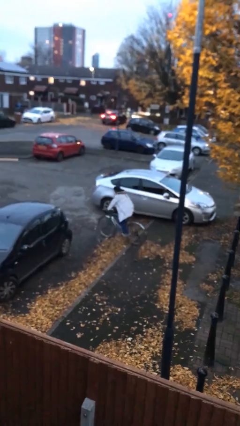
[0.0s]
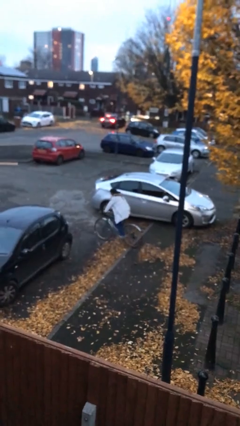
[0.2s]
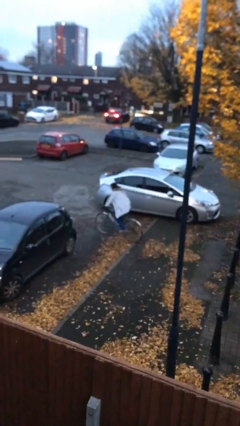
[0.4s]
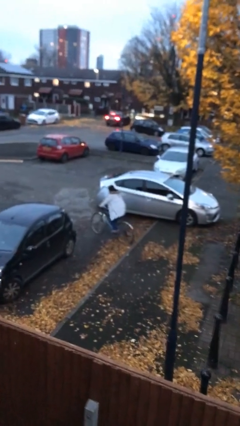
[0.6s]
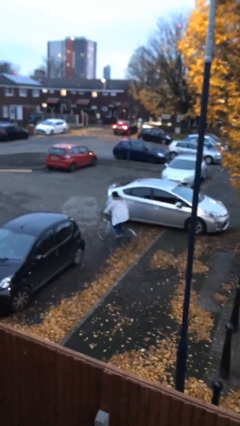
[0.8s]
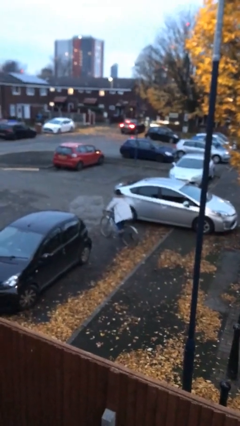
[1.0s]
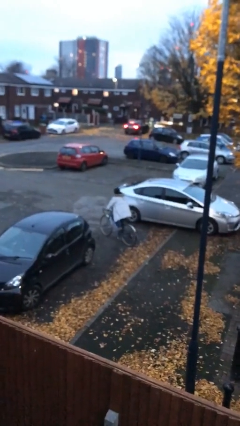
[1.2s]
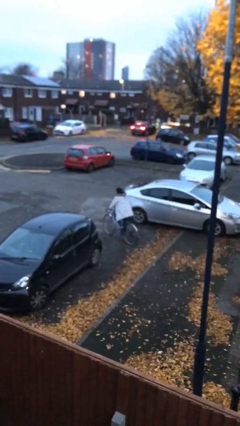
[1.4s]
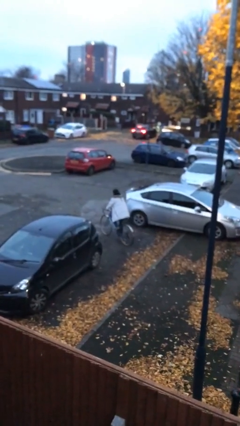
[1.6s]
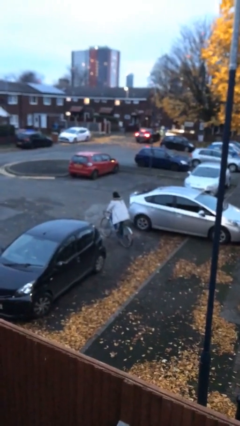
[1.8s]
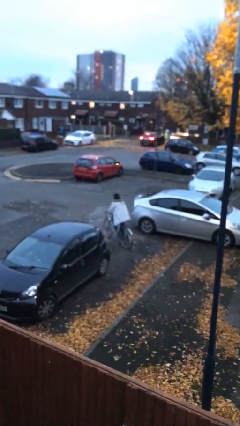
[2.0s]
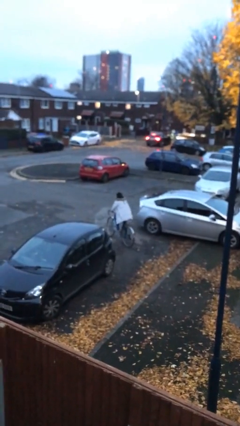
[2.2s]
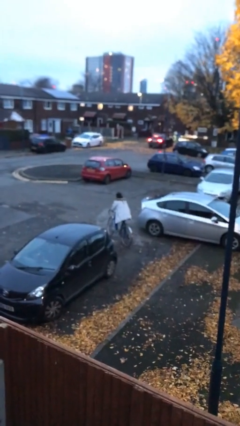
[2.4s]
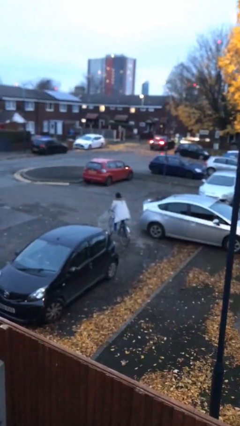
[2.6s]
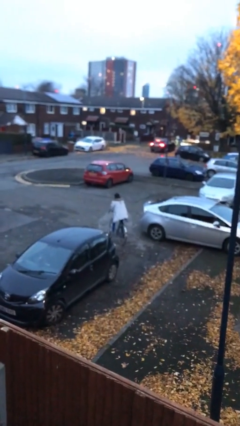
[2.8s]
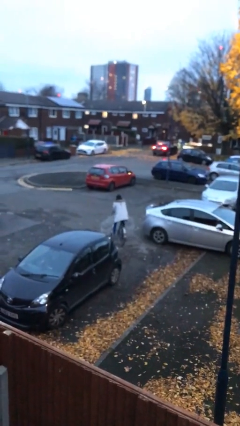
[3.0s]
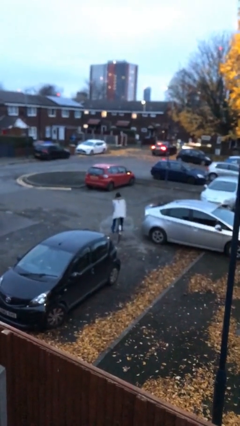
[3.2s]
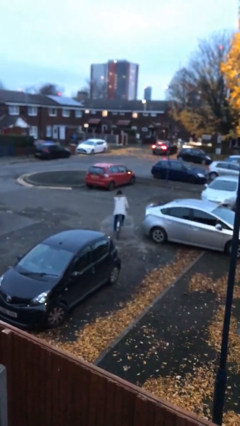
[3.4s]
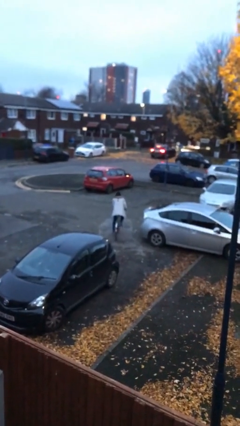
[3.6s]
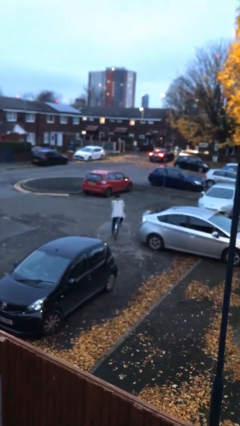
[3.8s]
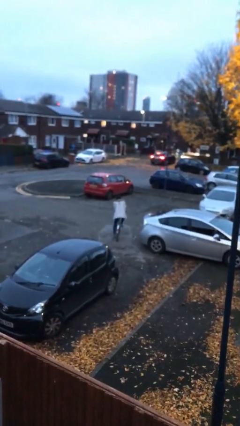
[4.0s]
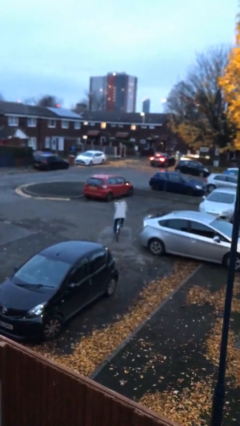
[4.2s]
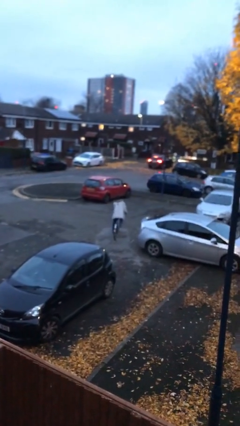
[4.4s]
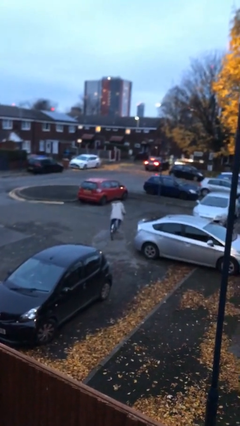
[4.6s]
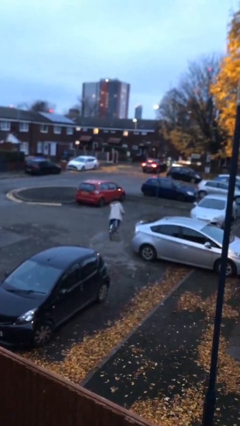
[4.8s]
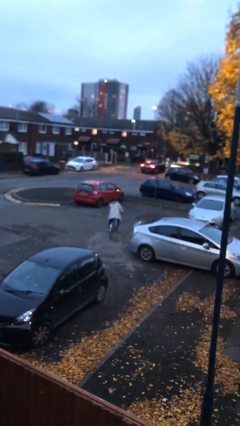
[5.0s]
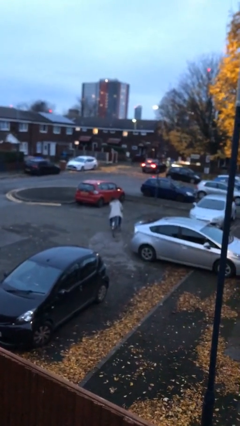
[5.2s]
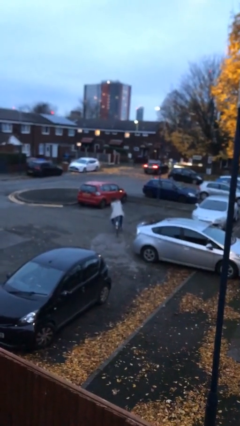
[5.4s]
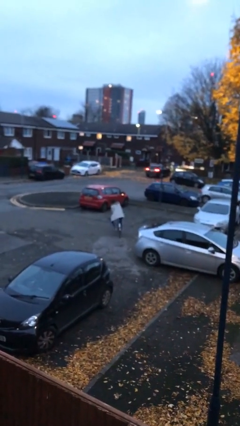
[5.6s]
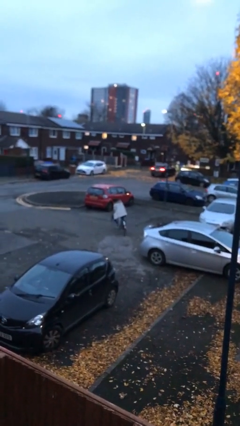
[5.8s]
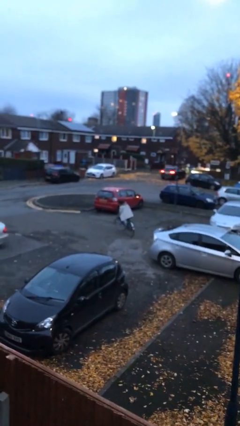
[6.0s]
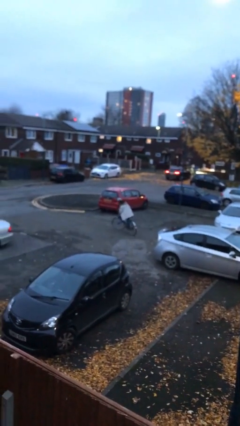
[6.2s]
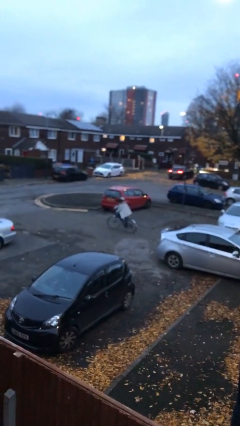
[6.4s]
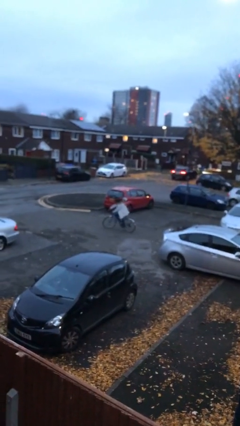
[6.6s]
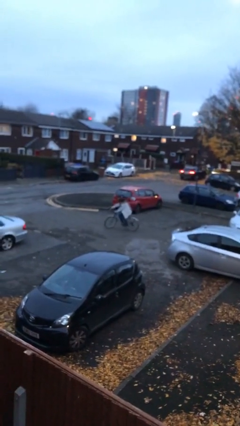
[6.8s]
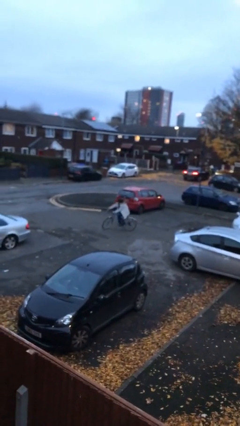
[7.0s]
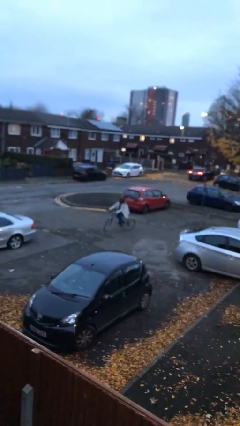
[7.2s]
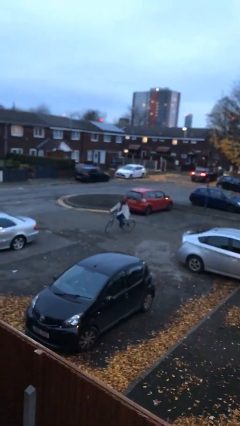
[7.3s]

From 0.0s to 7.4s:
person rides bicycle

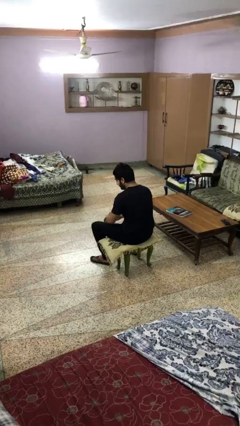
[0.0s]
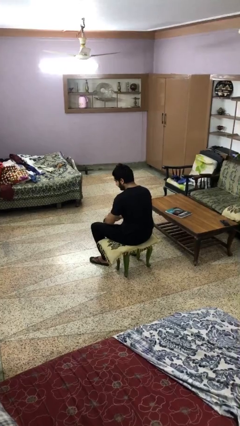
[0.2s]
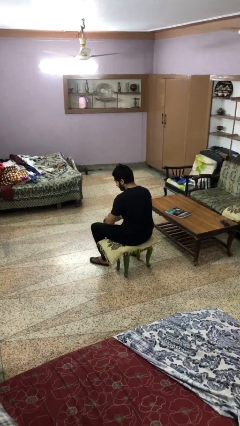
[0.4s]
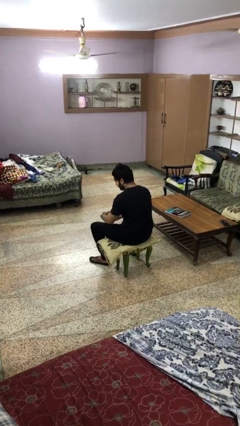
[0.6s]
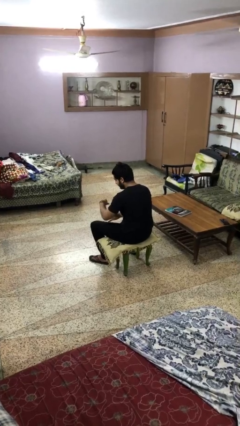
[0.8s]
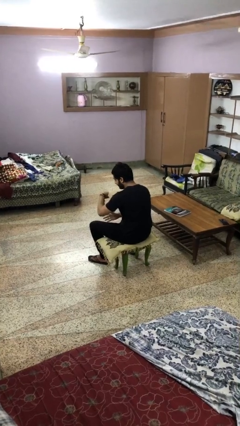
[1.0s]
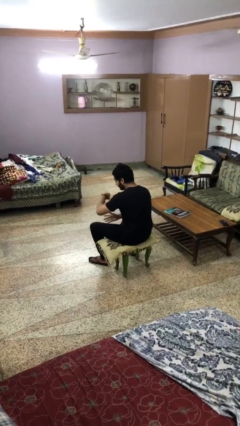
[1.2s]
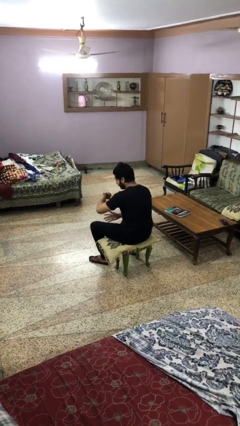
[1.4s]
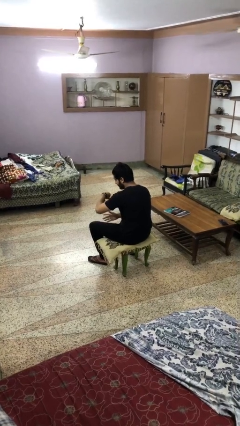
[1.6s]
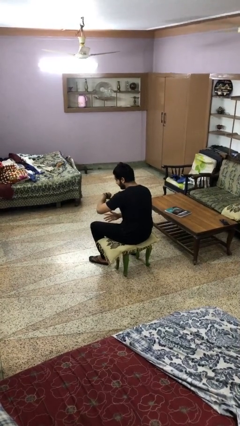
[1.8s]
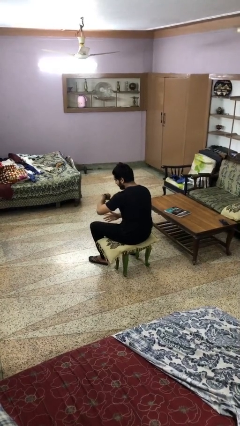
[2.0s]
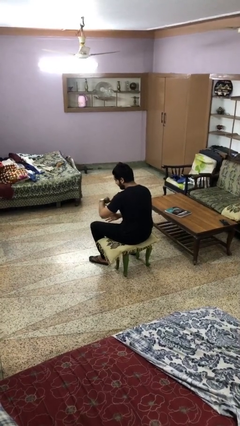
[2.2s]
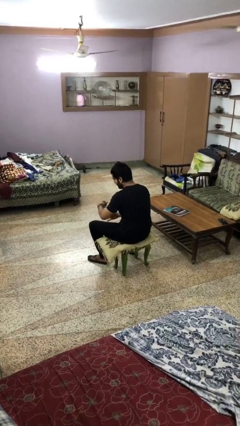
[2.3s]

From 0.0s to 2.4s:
person looks at wristwatch

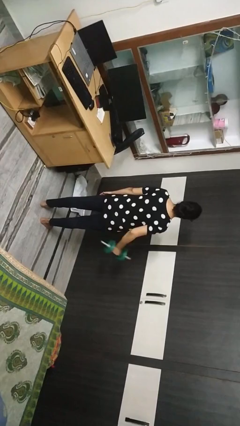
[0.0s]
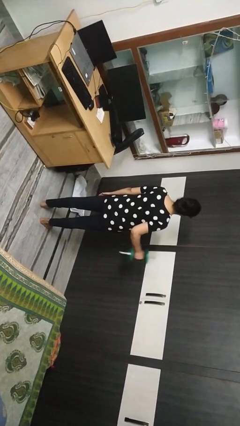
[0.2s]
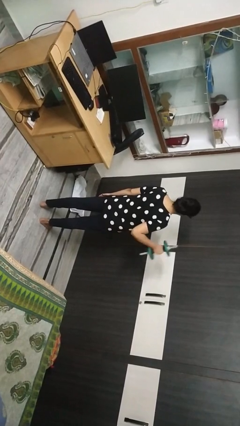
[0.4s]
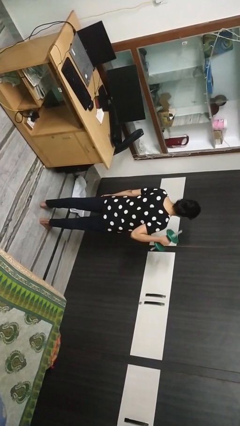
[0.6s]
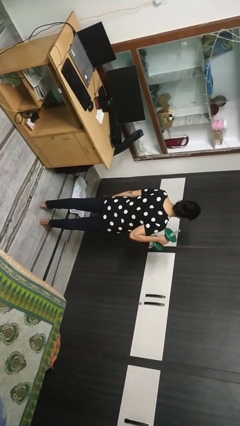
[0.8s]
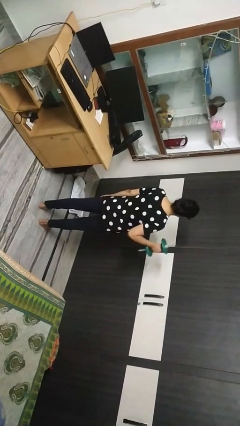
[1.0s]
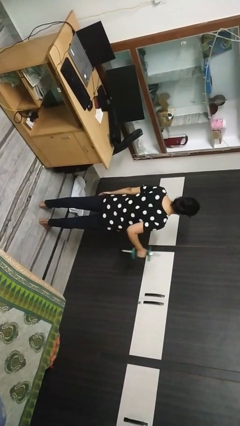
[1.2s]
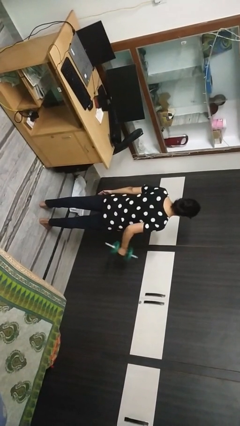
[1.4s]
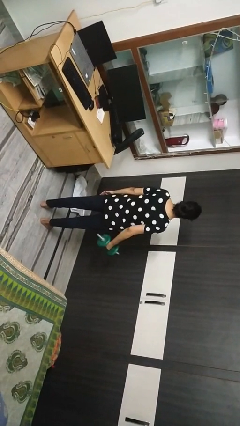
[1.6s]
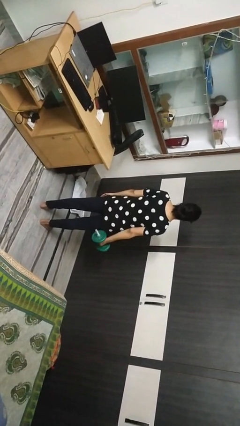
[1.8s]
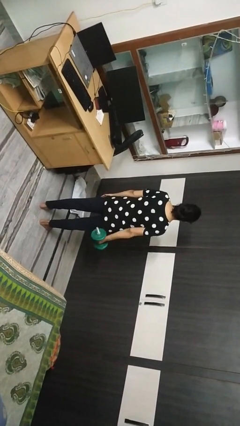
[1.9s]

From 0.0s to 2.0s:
person lifts dumbbells

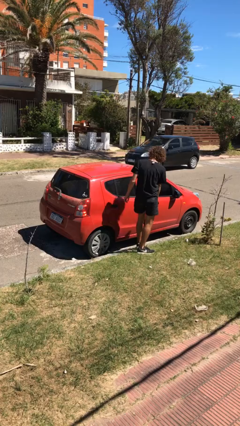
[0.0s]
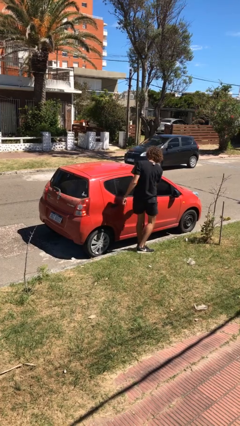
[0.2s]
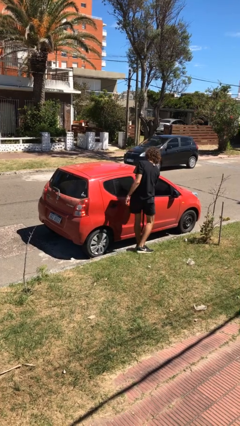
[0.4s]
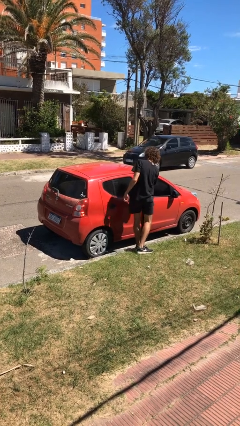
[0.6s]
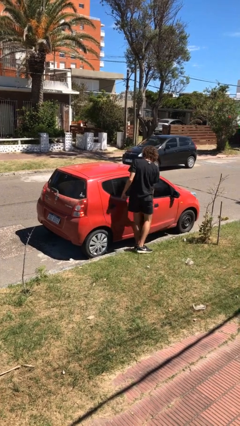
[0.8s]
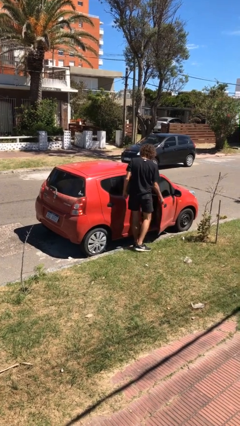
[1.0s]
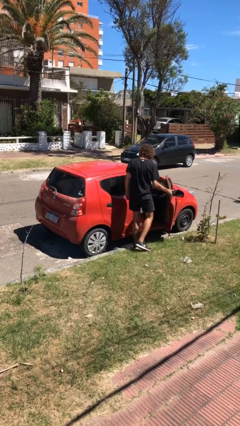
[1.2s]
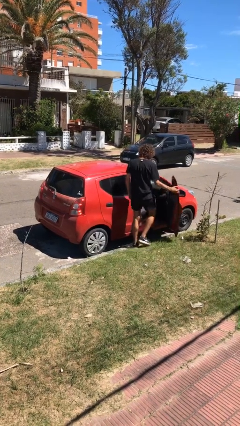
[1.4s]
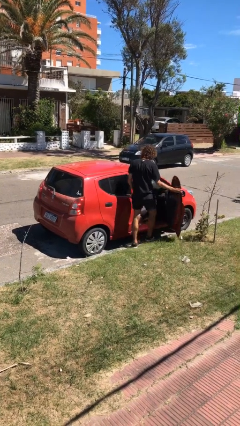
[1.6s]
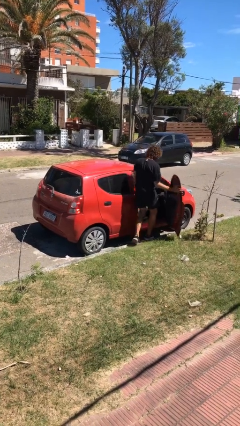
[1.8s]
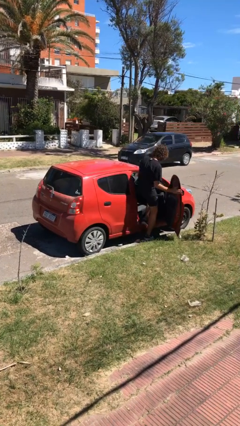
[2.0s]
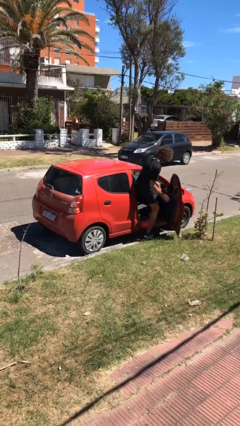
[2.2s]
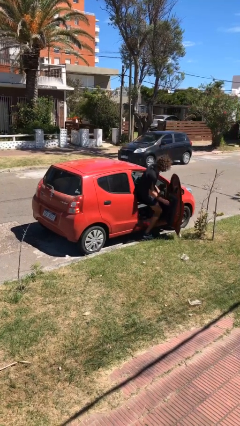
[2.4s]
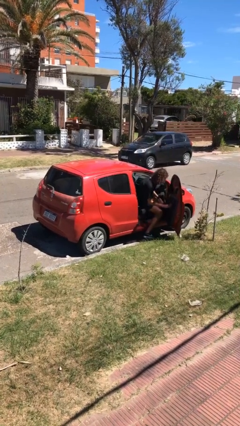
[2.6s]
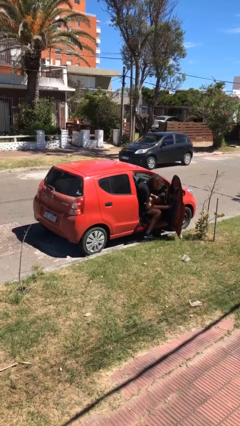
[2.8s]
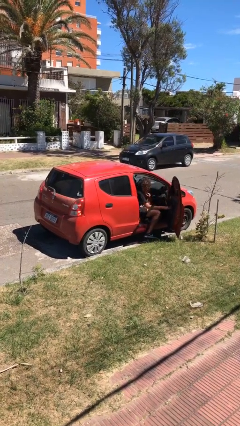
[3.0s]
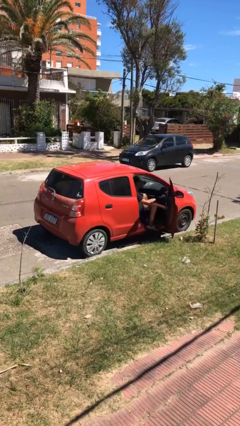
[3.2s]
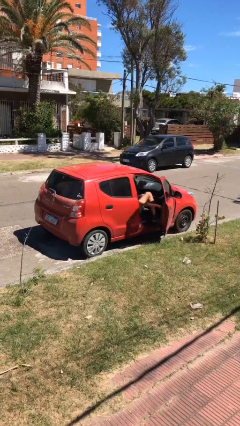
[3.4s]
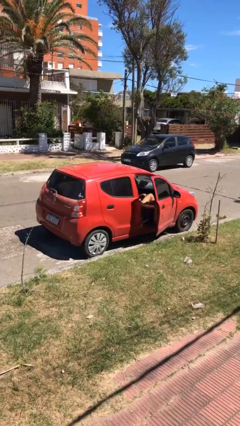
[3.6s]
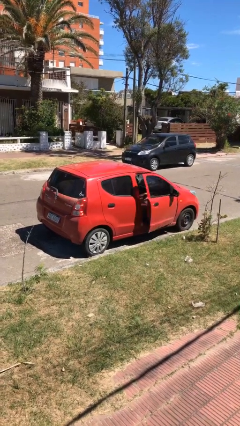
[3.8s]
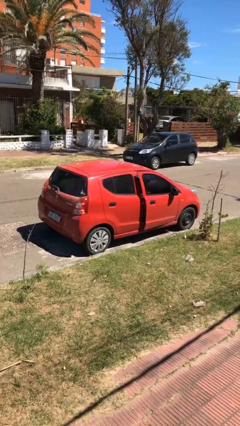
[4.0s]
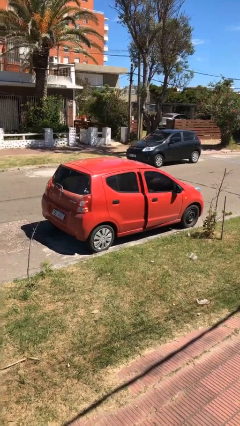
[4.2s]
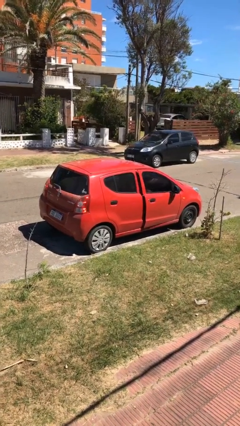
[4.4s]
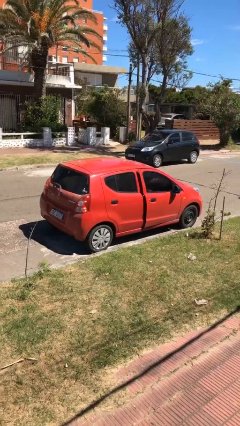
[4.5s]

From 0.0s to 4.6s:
car picks up person

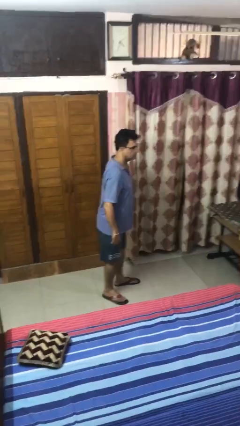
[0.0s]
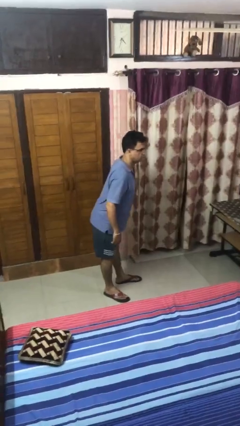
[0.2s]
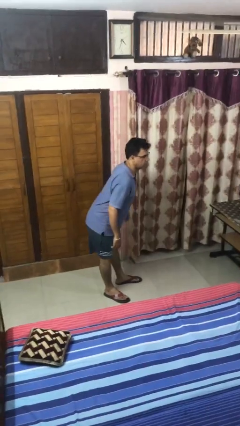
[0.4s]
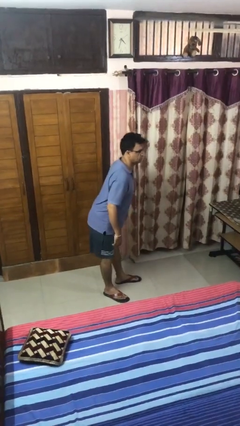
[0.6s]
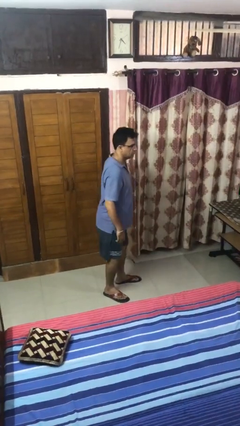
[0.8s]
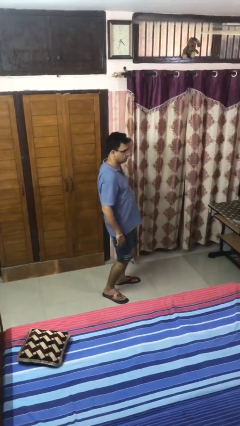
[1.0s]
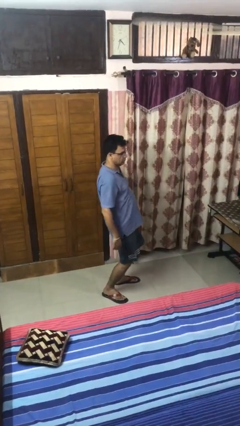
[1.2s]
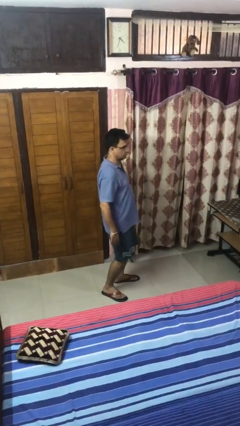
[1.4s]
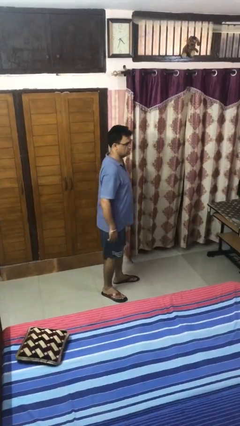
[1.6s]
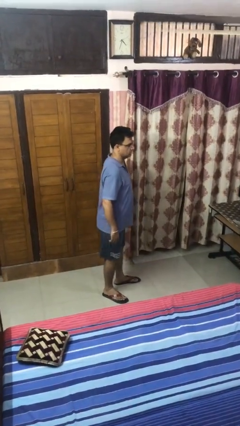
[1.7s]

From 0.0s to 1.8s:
person wiggles hips
